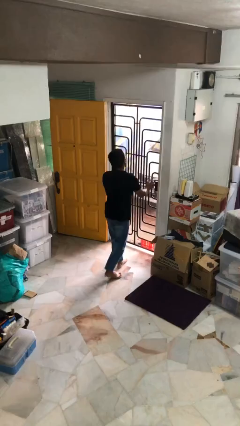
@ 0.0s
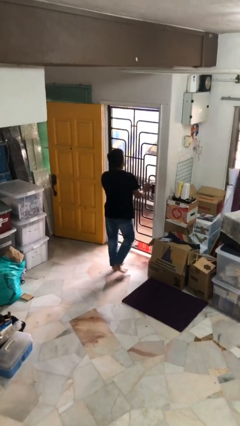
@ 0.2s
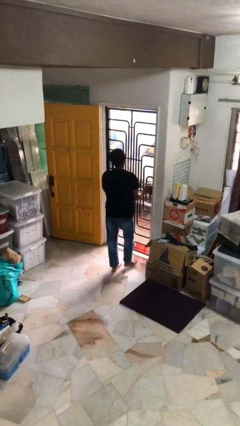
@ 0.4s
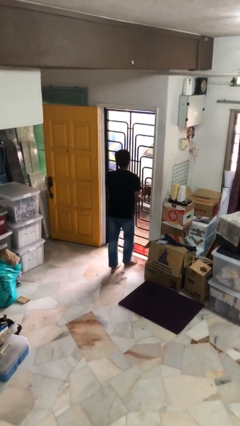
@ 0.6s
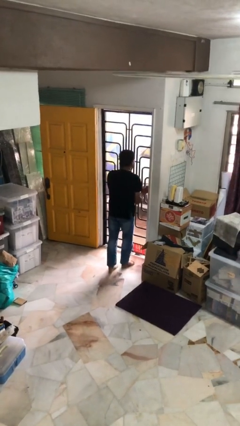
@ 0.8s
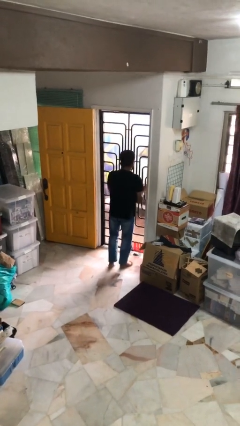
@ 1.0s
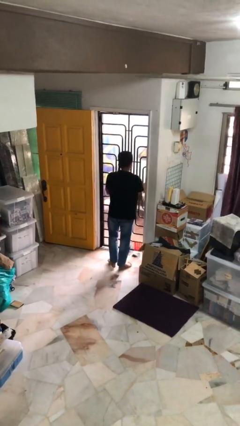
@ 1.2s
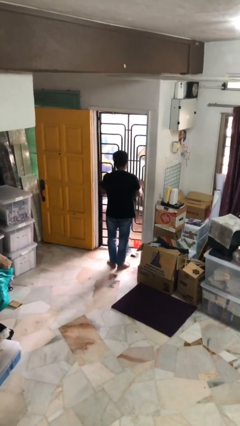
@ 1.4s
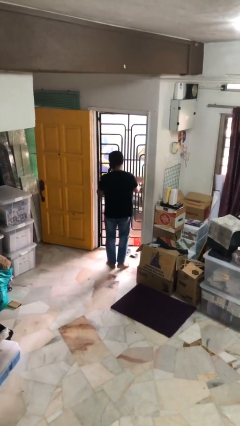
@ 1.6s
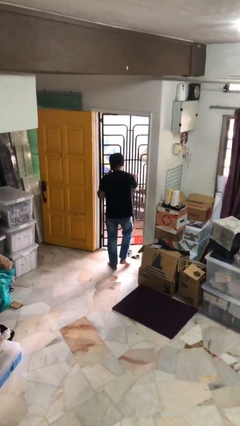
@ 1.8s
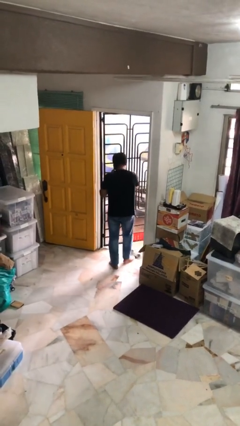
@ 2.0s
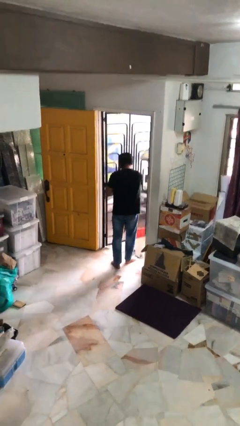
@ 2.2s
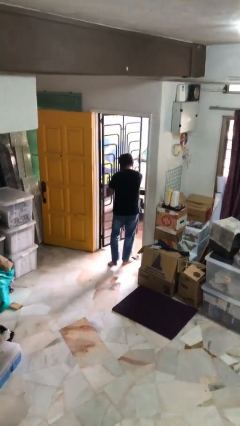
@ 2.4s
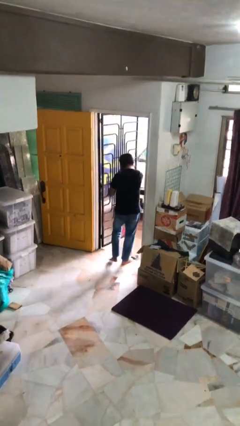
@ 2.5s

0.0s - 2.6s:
person opens facility door

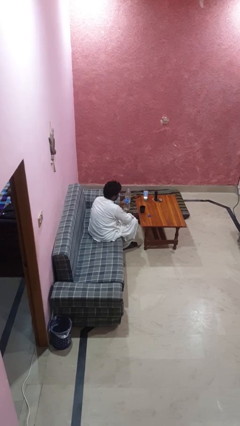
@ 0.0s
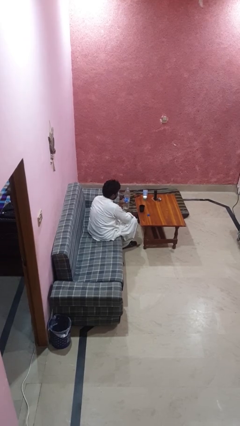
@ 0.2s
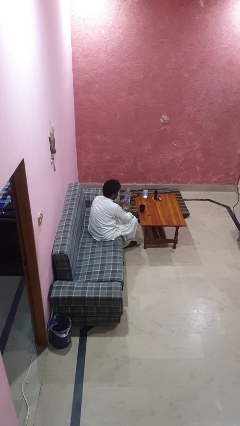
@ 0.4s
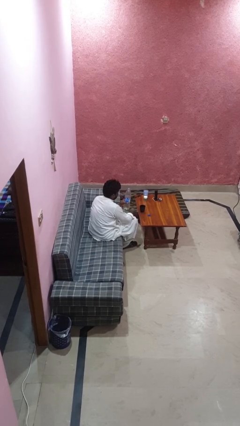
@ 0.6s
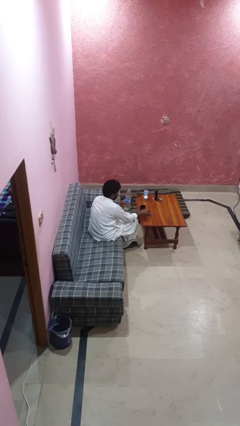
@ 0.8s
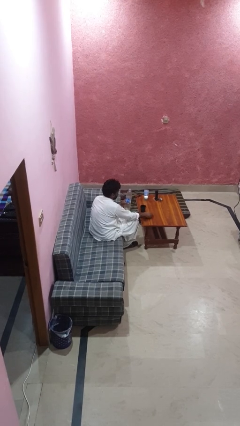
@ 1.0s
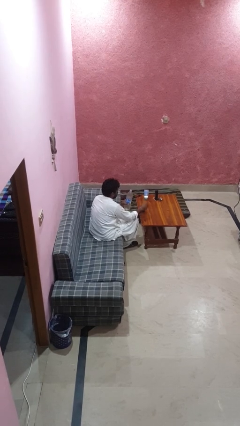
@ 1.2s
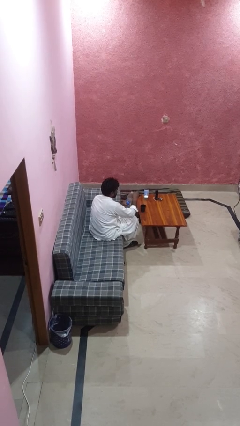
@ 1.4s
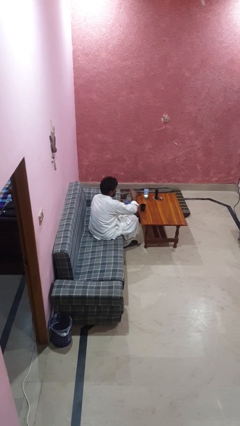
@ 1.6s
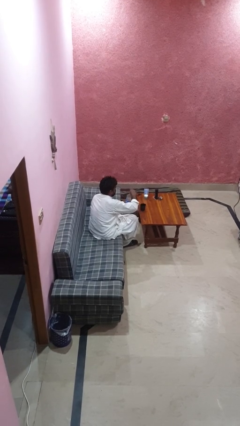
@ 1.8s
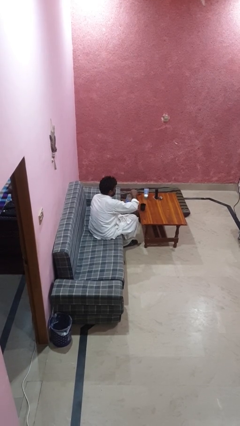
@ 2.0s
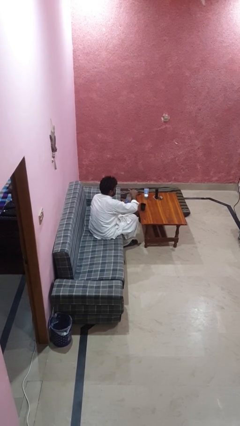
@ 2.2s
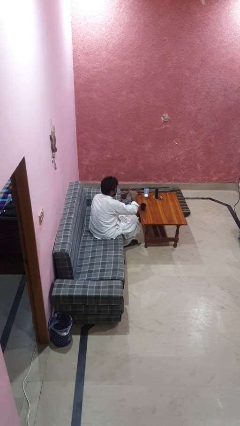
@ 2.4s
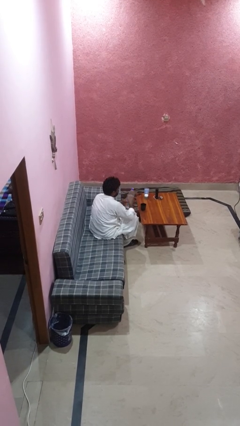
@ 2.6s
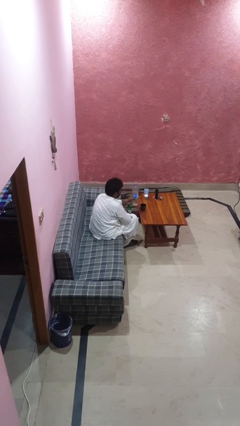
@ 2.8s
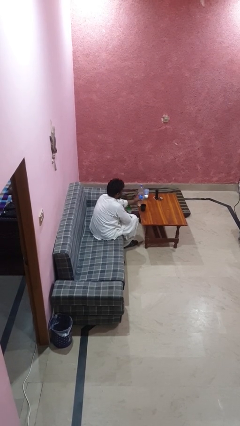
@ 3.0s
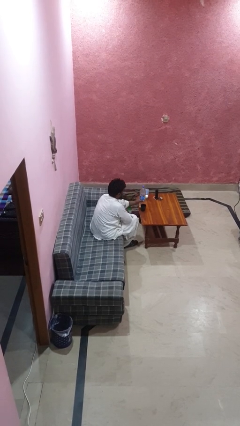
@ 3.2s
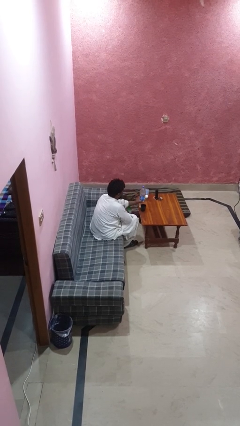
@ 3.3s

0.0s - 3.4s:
person screws lid to bottle

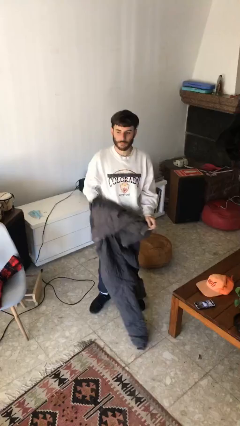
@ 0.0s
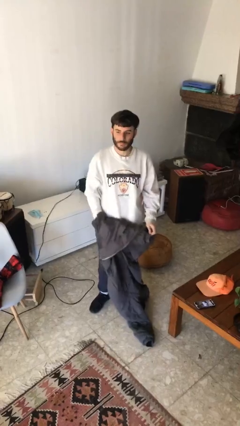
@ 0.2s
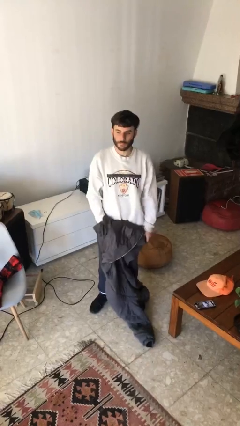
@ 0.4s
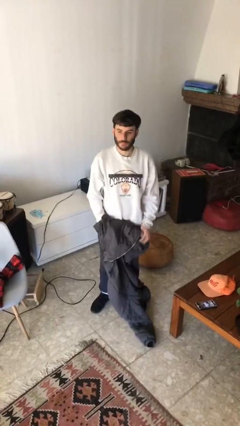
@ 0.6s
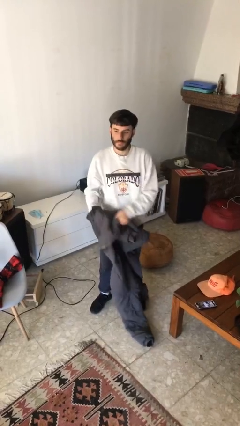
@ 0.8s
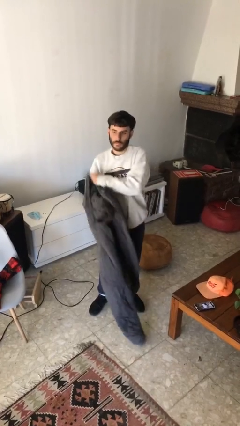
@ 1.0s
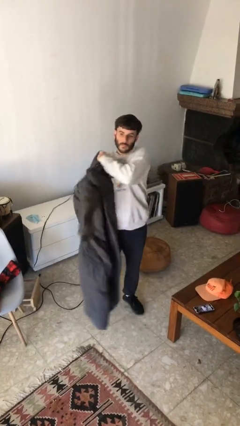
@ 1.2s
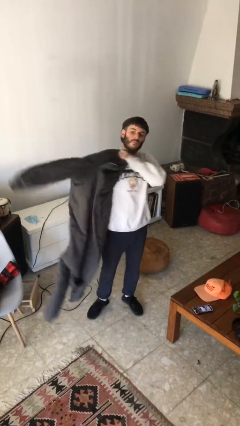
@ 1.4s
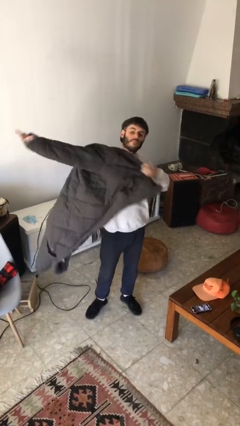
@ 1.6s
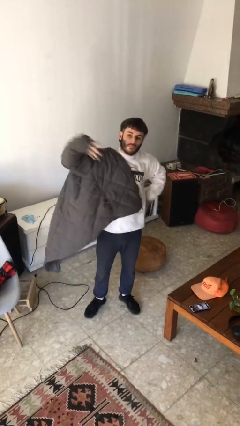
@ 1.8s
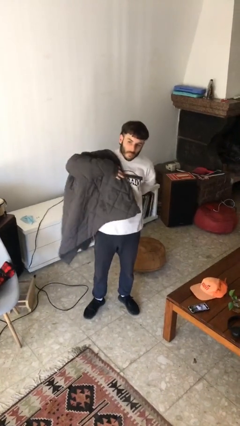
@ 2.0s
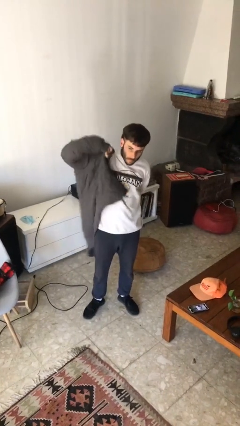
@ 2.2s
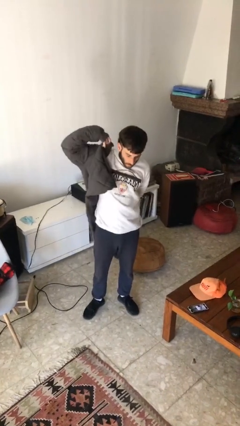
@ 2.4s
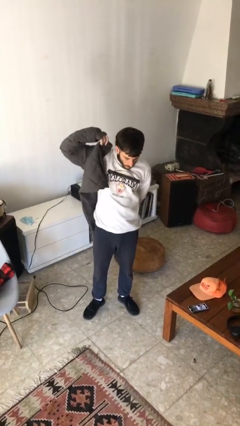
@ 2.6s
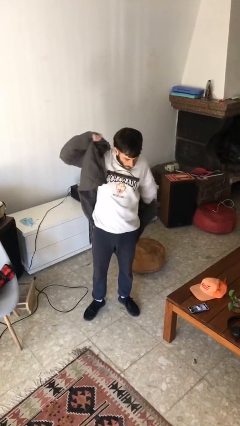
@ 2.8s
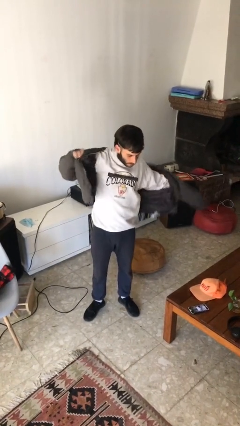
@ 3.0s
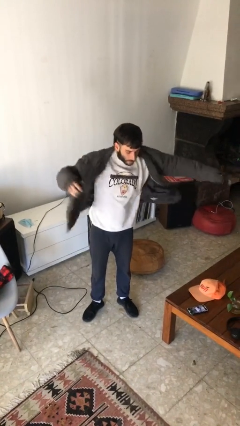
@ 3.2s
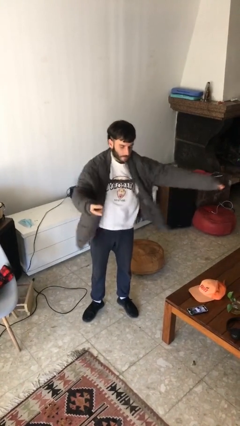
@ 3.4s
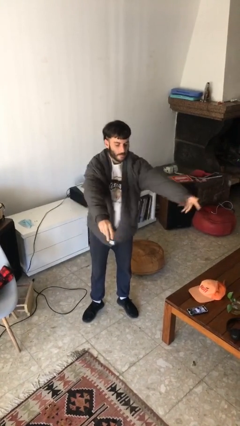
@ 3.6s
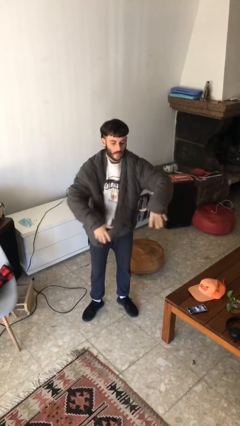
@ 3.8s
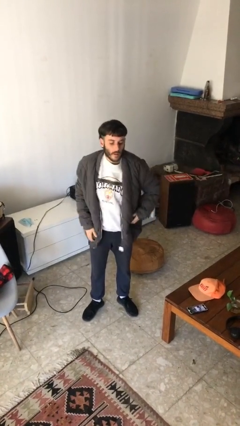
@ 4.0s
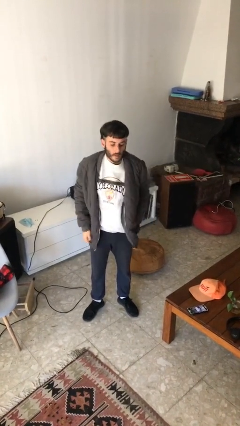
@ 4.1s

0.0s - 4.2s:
person puts on jacket

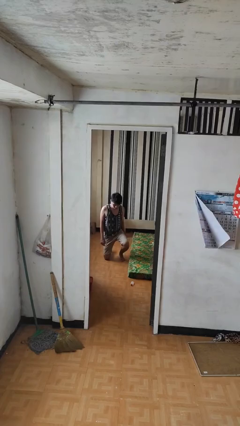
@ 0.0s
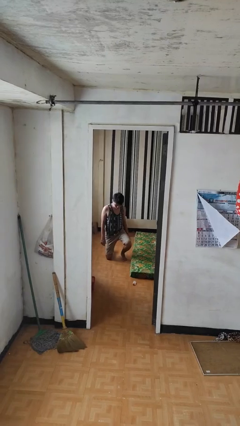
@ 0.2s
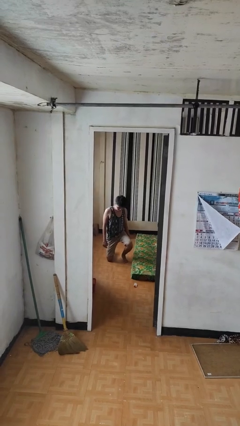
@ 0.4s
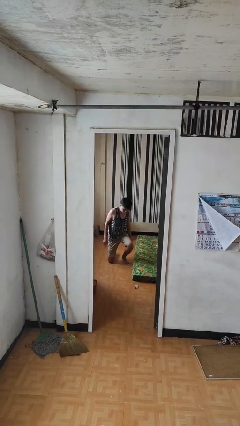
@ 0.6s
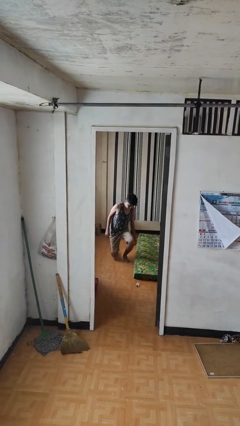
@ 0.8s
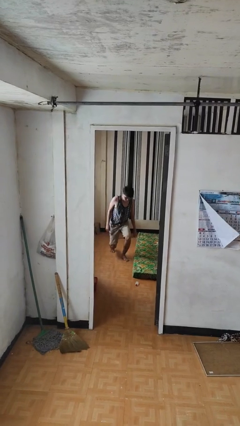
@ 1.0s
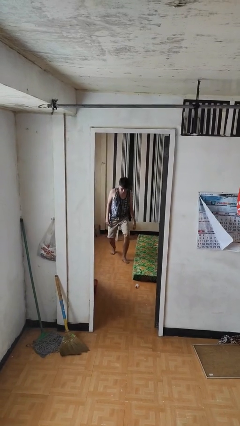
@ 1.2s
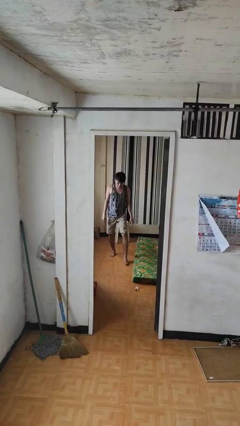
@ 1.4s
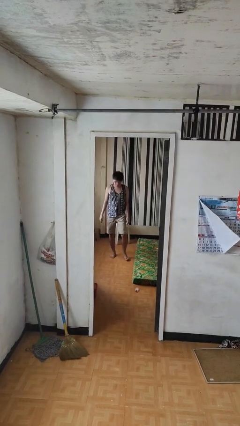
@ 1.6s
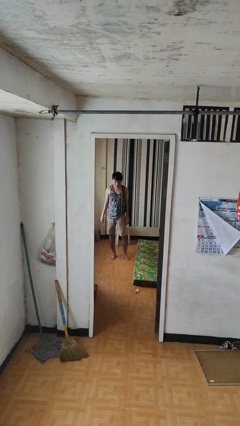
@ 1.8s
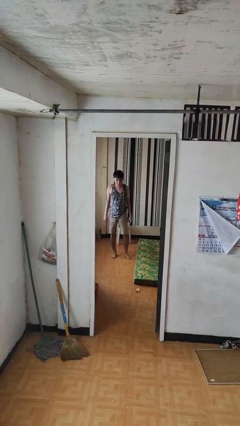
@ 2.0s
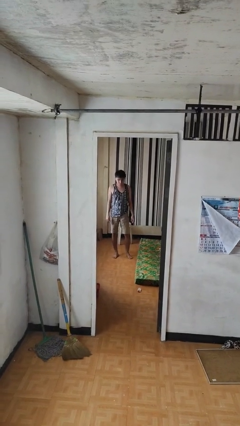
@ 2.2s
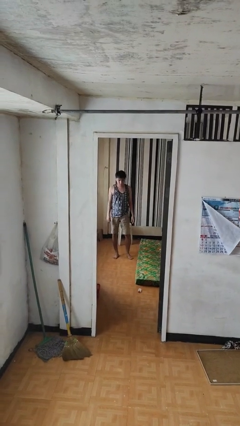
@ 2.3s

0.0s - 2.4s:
person stands up from floor

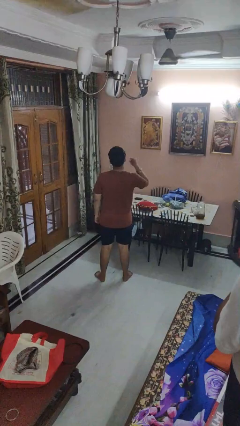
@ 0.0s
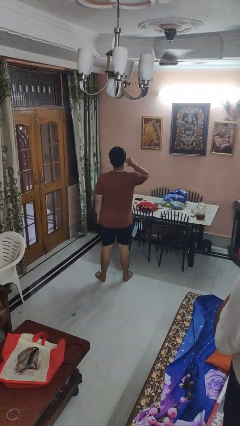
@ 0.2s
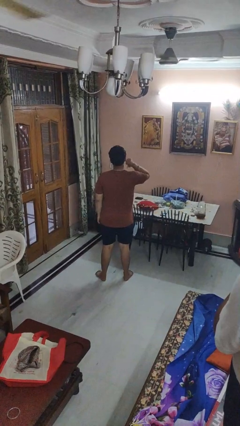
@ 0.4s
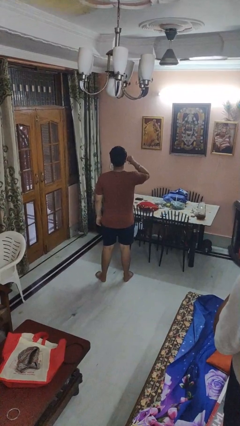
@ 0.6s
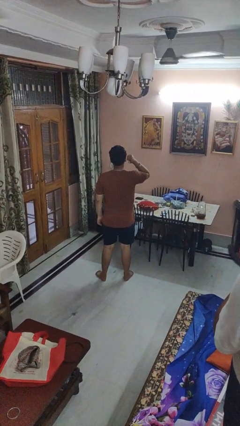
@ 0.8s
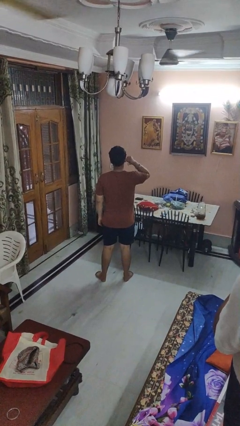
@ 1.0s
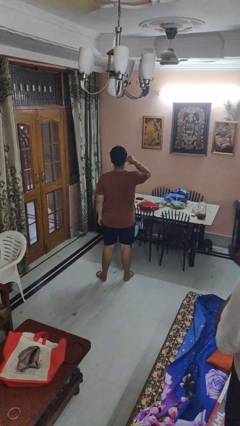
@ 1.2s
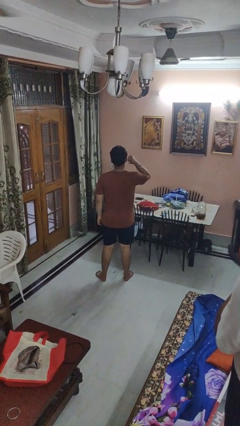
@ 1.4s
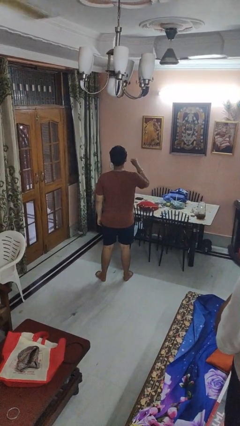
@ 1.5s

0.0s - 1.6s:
person gestures behind me

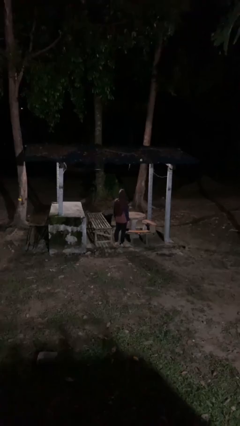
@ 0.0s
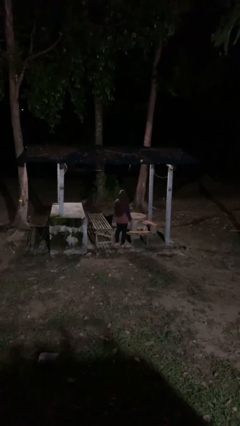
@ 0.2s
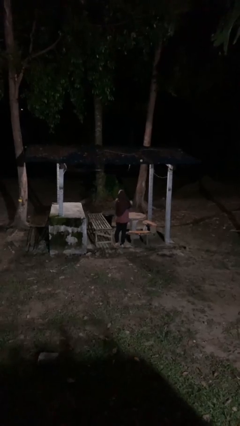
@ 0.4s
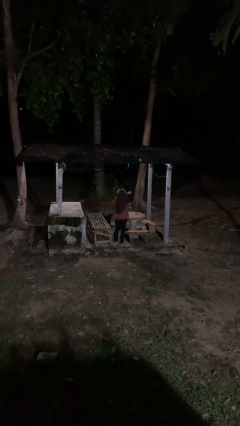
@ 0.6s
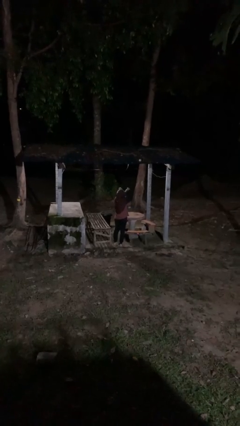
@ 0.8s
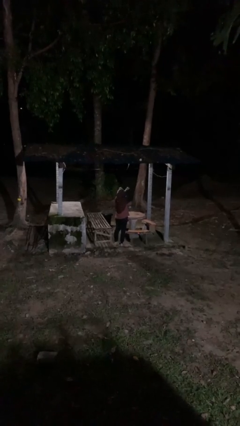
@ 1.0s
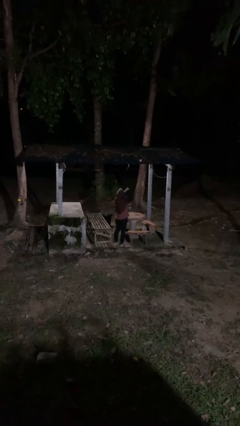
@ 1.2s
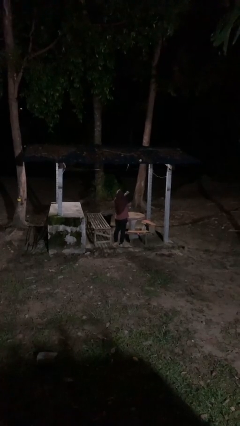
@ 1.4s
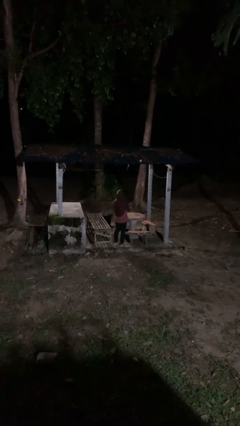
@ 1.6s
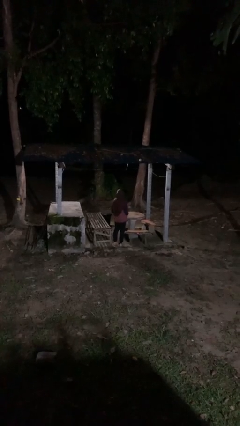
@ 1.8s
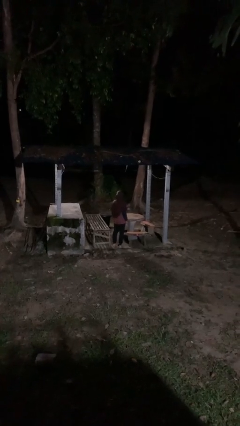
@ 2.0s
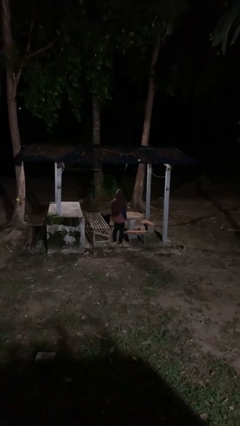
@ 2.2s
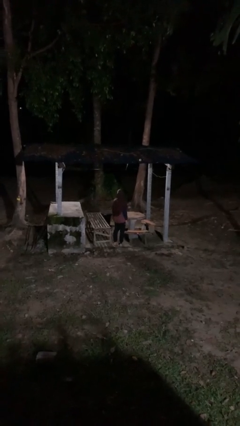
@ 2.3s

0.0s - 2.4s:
person gestures arms x

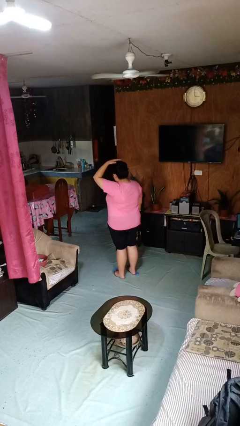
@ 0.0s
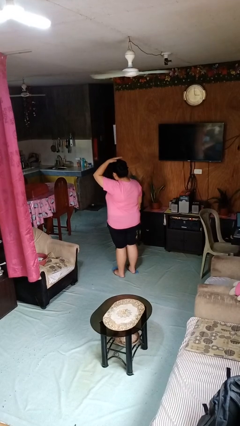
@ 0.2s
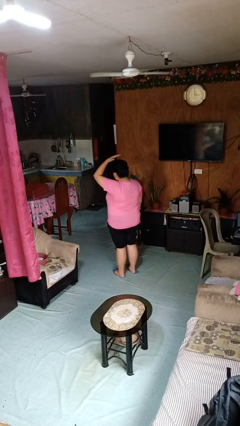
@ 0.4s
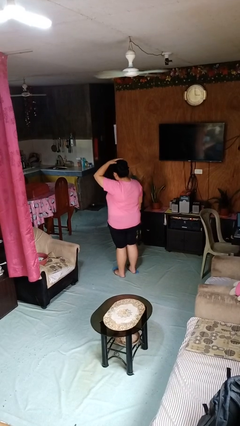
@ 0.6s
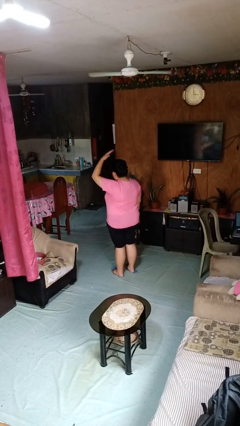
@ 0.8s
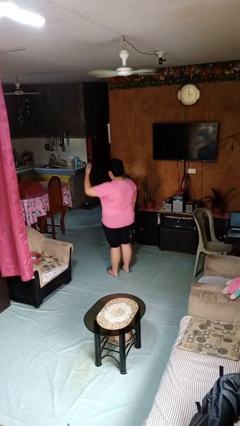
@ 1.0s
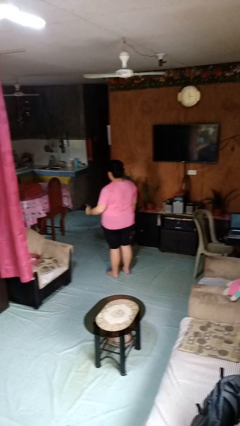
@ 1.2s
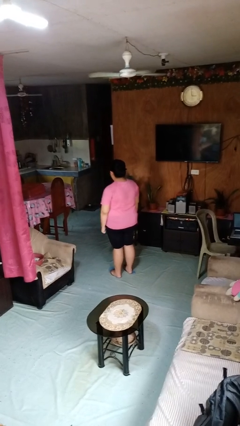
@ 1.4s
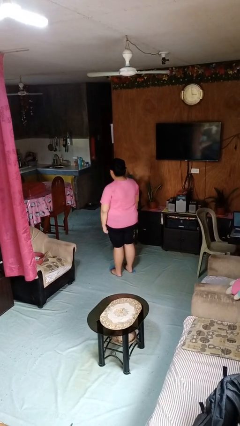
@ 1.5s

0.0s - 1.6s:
person pats head
